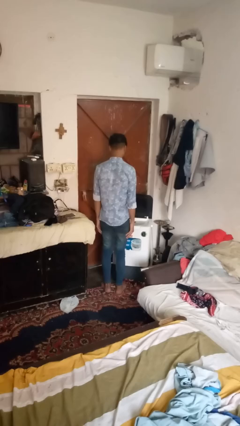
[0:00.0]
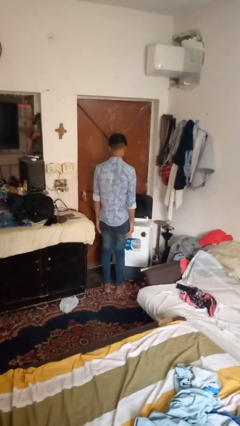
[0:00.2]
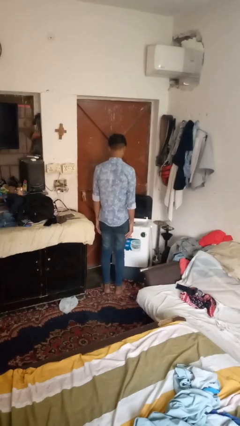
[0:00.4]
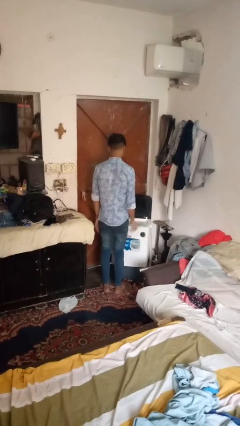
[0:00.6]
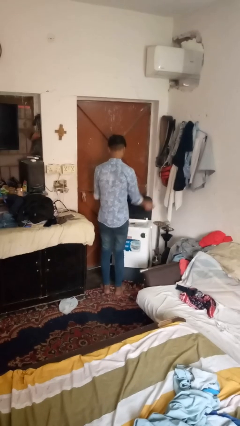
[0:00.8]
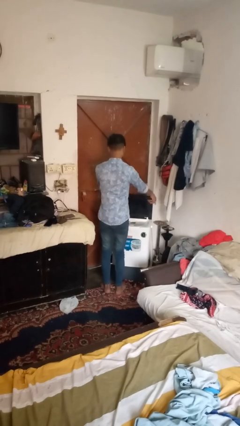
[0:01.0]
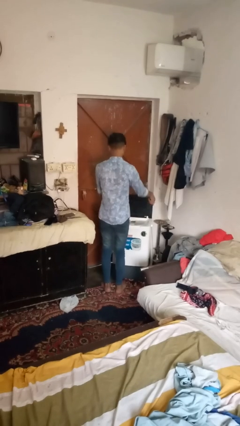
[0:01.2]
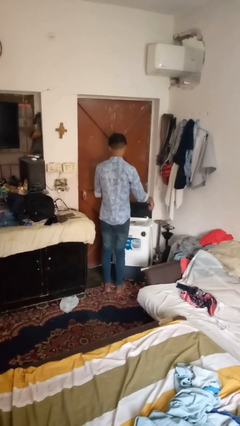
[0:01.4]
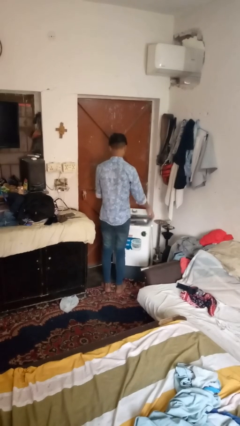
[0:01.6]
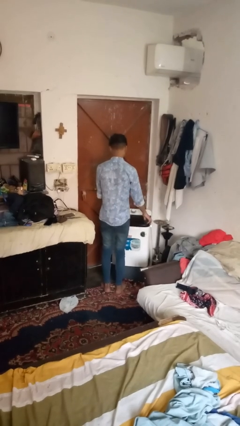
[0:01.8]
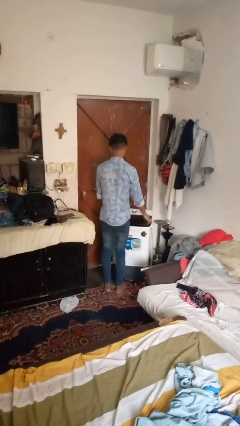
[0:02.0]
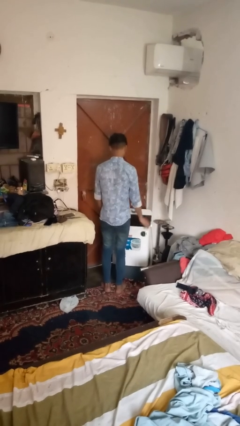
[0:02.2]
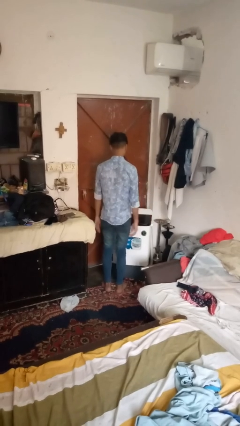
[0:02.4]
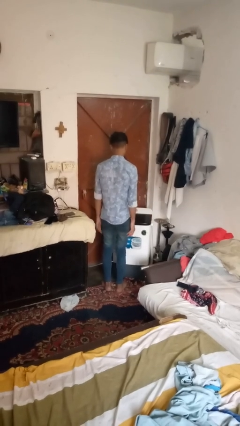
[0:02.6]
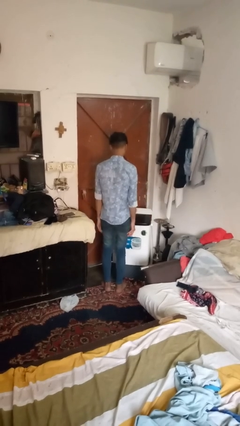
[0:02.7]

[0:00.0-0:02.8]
person closes clothes washer

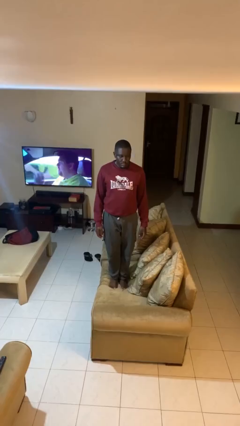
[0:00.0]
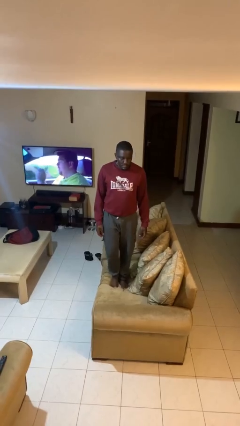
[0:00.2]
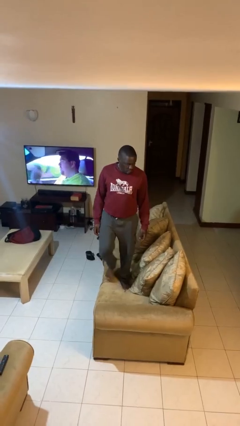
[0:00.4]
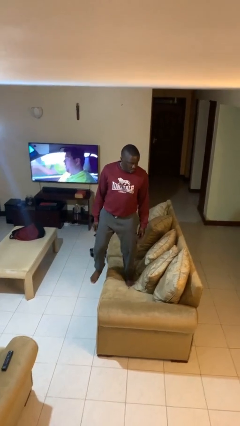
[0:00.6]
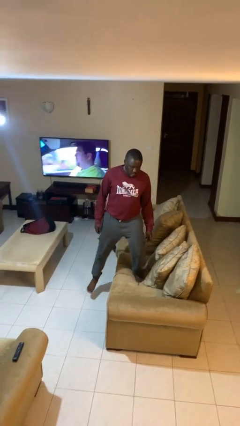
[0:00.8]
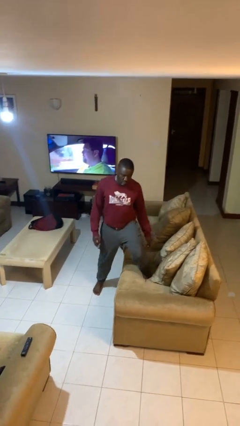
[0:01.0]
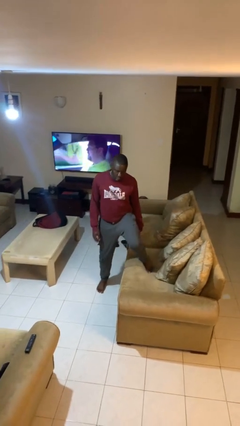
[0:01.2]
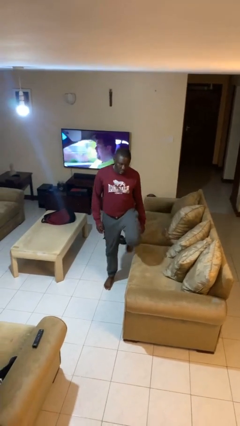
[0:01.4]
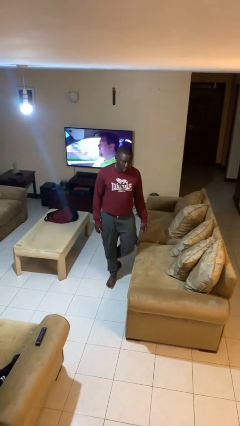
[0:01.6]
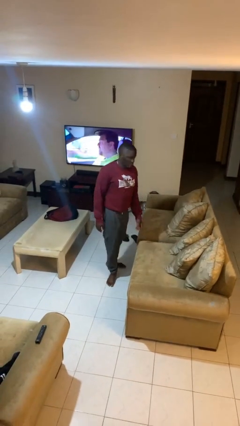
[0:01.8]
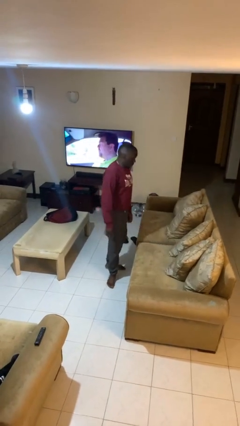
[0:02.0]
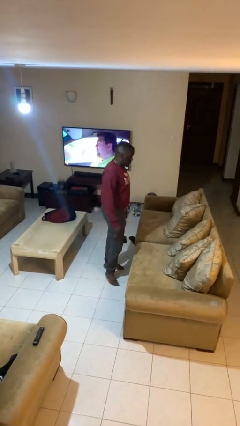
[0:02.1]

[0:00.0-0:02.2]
person climbs off couch

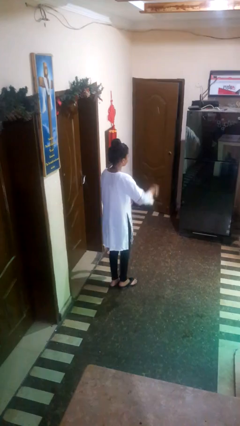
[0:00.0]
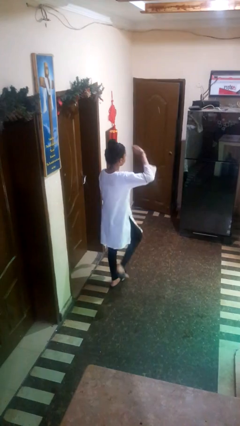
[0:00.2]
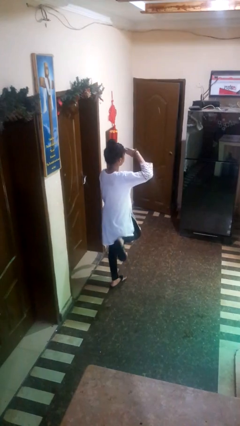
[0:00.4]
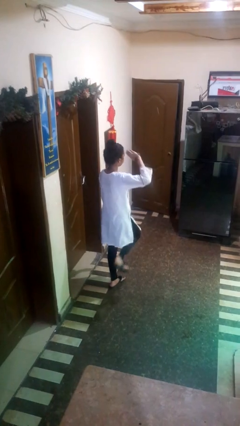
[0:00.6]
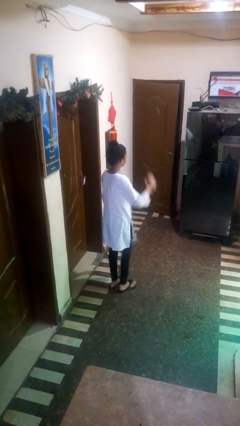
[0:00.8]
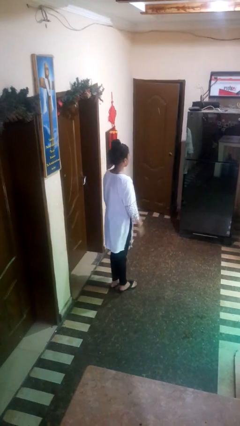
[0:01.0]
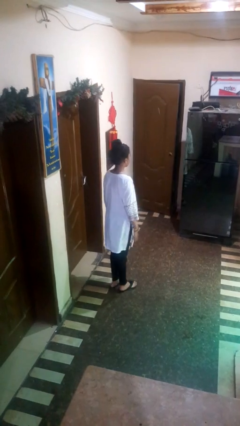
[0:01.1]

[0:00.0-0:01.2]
person salutes

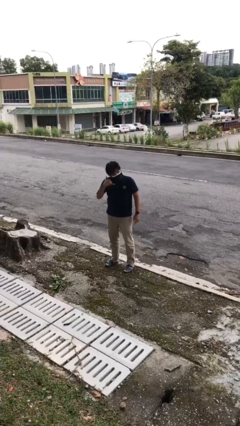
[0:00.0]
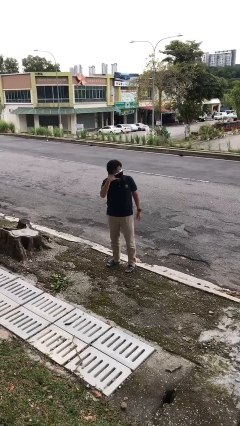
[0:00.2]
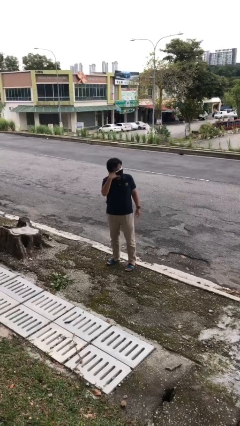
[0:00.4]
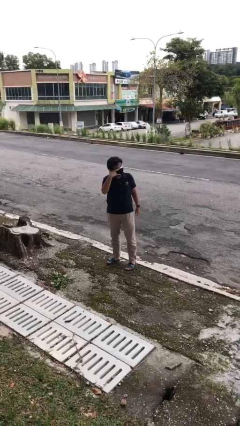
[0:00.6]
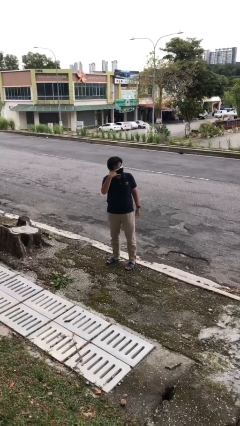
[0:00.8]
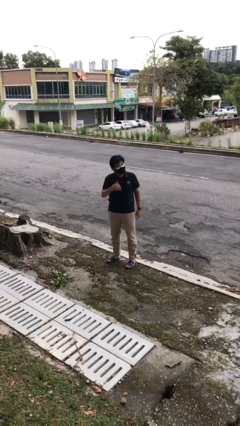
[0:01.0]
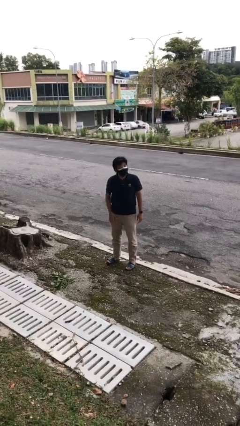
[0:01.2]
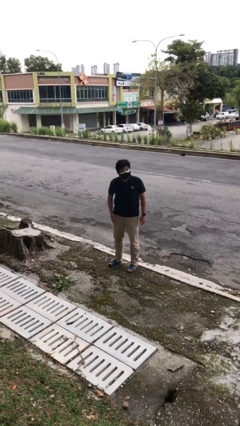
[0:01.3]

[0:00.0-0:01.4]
person gestures call me

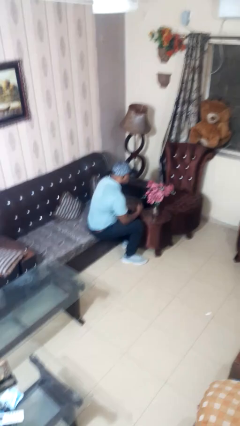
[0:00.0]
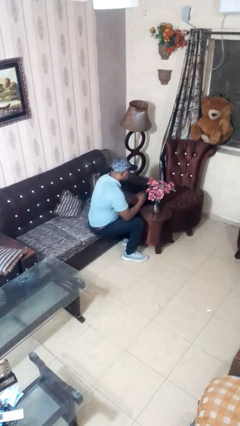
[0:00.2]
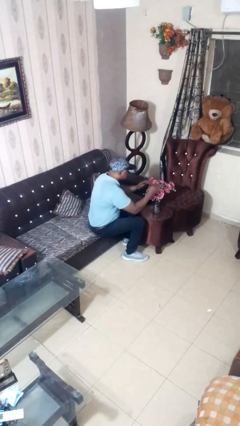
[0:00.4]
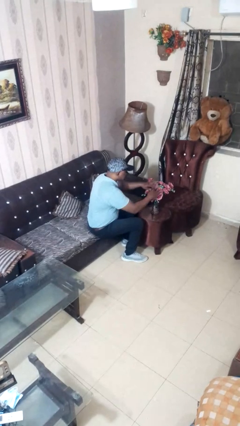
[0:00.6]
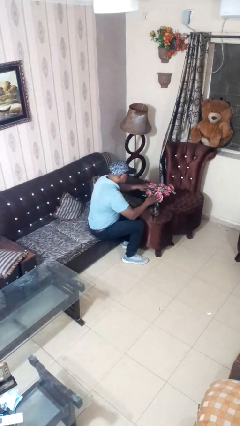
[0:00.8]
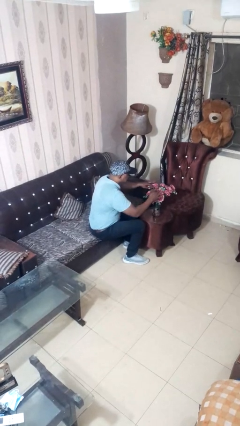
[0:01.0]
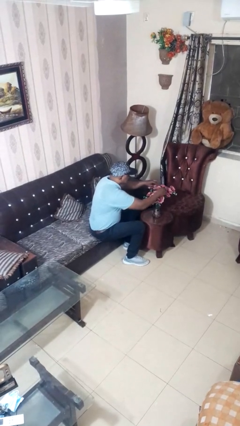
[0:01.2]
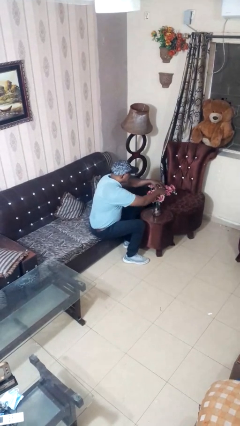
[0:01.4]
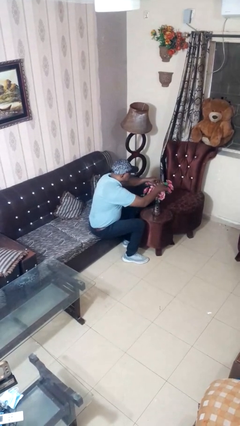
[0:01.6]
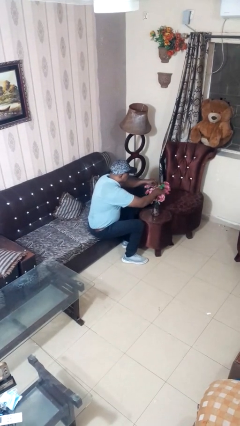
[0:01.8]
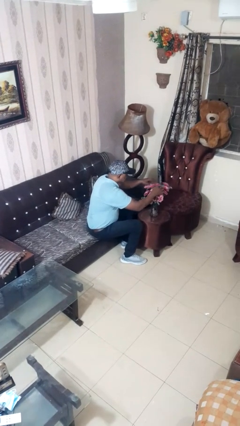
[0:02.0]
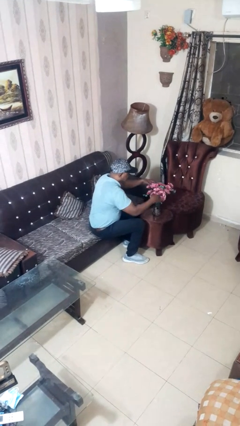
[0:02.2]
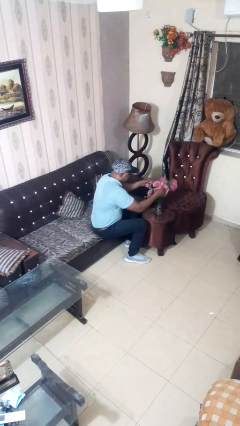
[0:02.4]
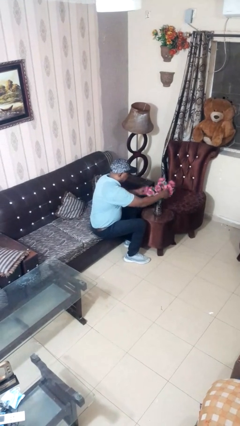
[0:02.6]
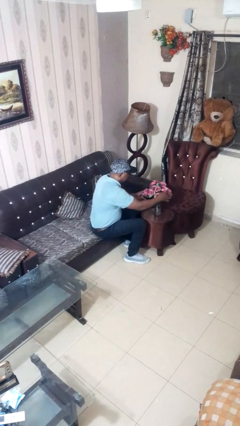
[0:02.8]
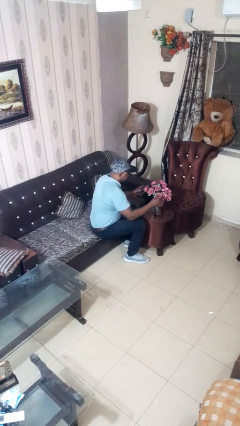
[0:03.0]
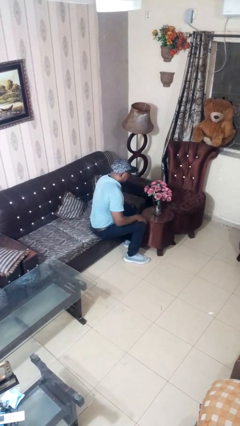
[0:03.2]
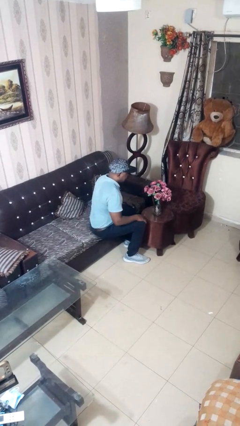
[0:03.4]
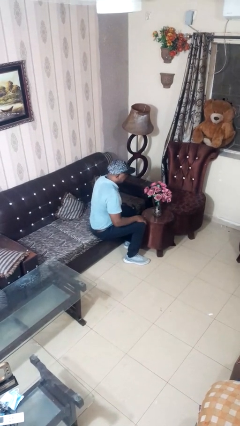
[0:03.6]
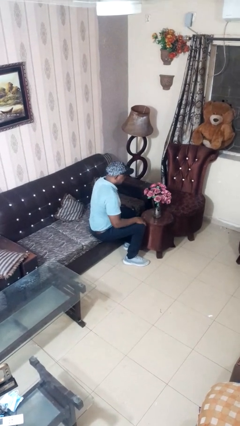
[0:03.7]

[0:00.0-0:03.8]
person arranges flowers in vase

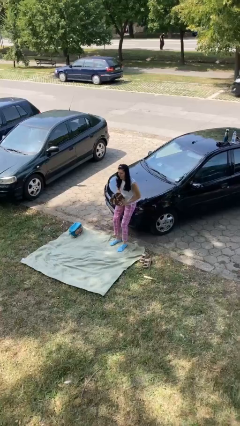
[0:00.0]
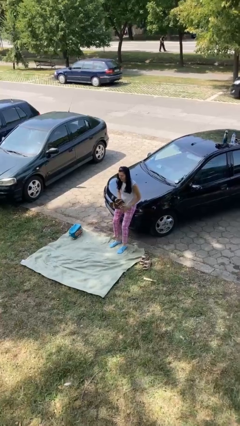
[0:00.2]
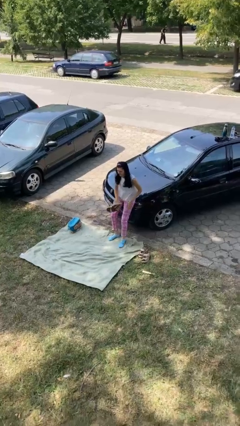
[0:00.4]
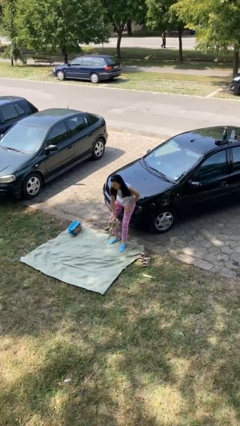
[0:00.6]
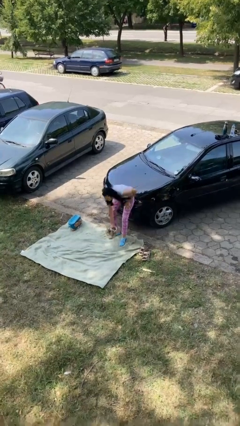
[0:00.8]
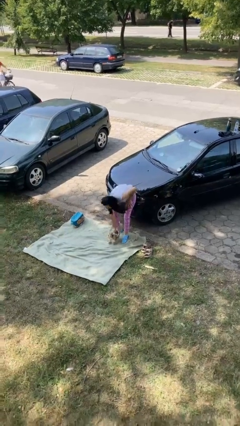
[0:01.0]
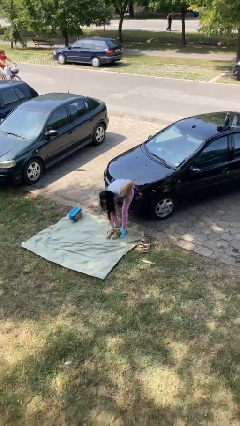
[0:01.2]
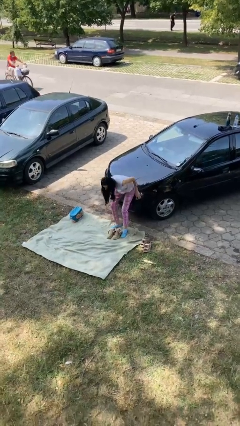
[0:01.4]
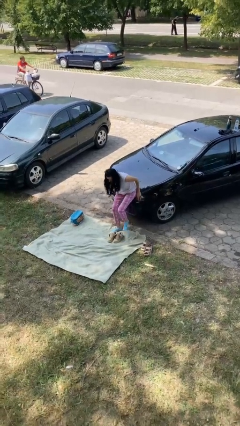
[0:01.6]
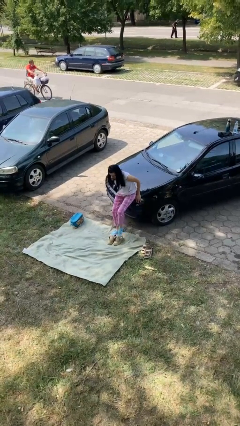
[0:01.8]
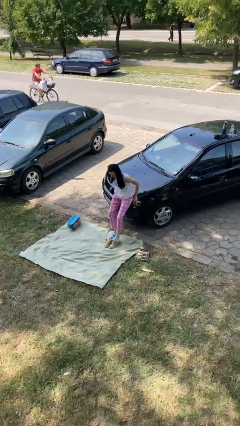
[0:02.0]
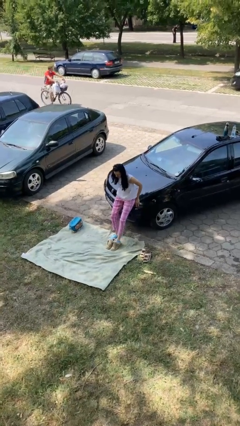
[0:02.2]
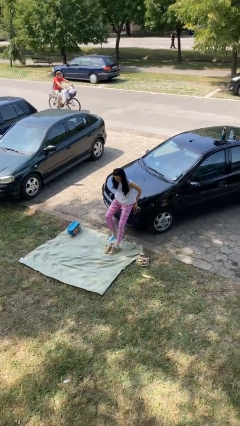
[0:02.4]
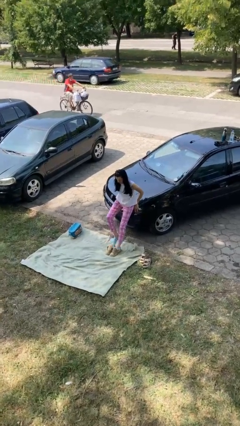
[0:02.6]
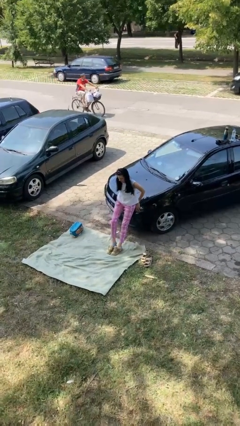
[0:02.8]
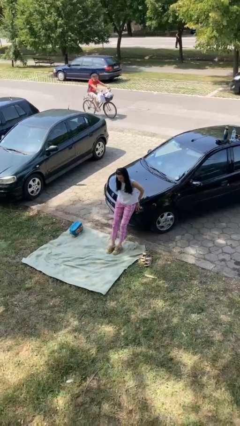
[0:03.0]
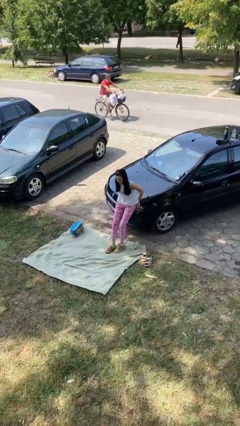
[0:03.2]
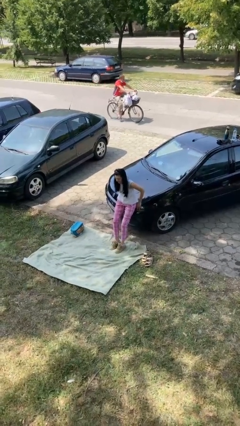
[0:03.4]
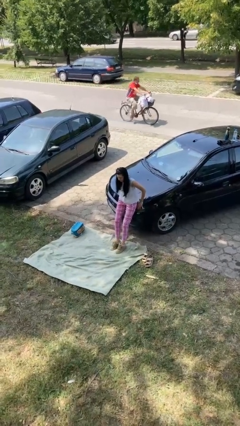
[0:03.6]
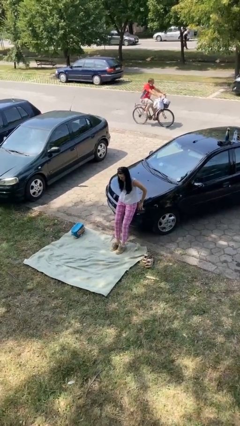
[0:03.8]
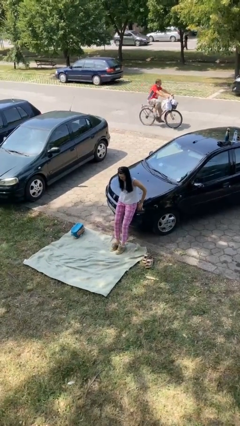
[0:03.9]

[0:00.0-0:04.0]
person puts on shoes

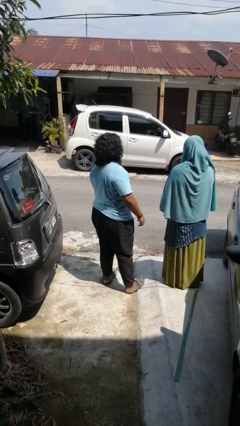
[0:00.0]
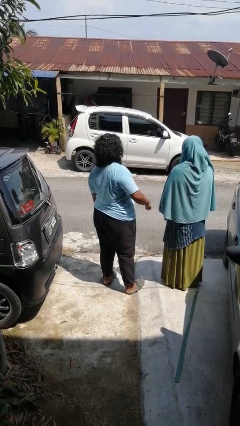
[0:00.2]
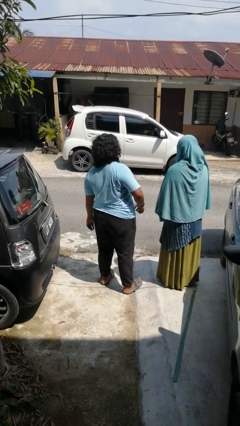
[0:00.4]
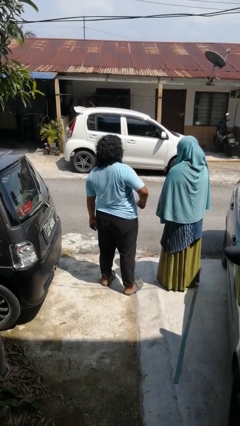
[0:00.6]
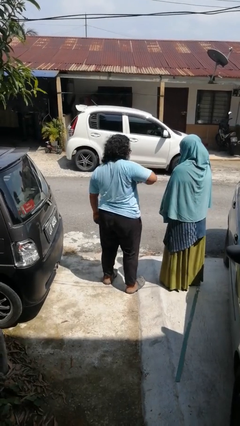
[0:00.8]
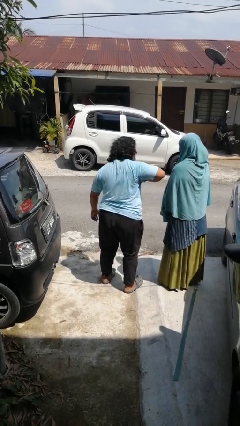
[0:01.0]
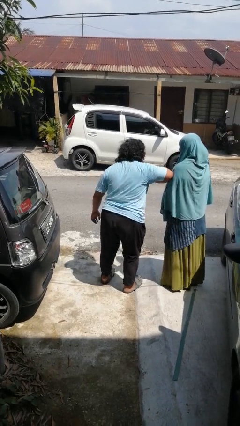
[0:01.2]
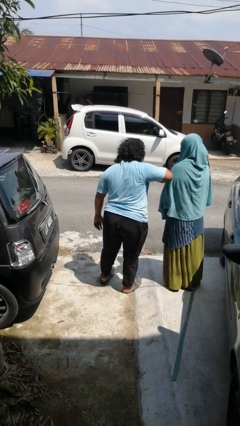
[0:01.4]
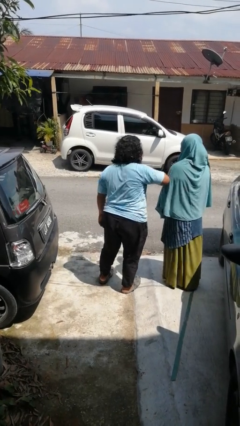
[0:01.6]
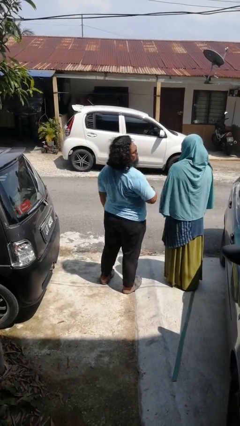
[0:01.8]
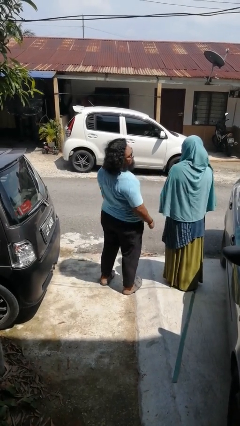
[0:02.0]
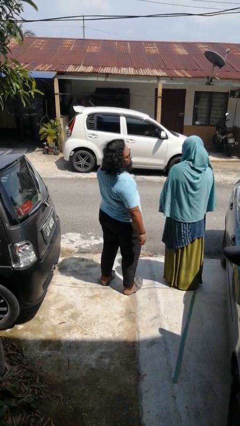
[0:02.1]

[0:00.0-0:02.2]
person nudges person with elbow
